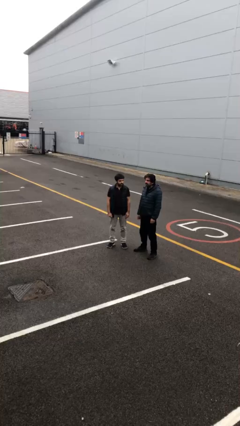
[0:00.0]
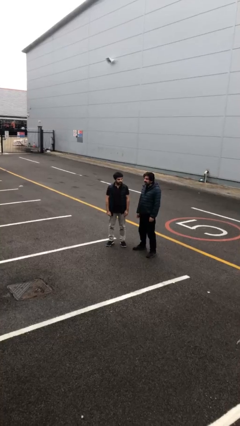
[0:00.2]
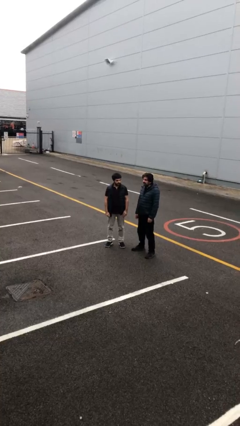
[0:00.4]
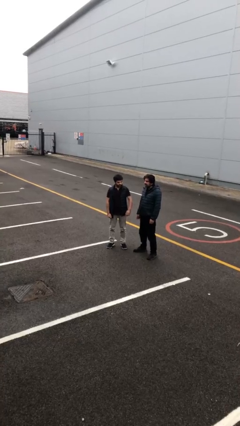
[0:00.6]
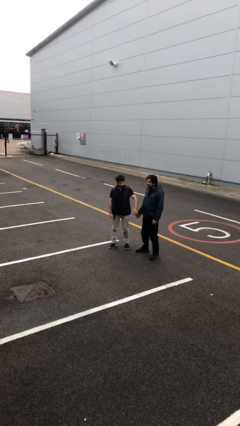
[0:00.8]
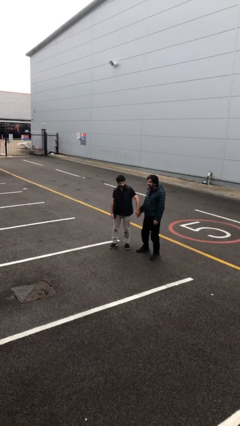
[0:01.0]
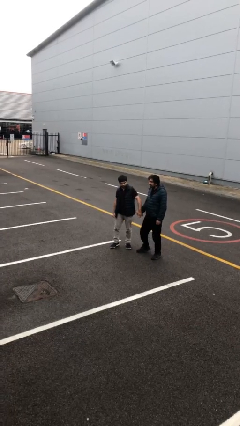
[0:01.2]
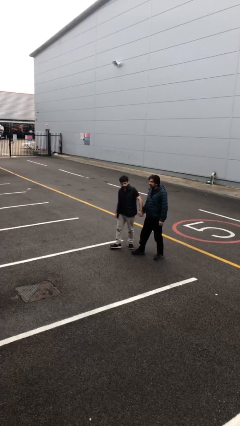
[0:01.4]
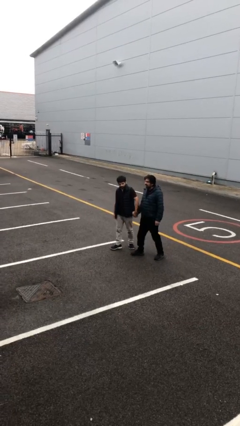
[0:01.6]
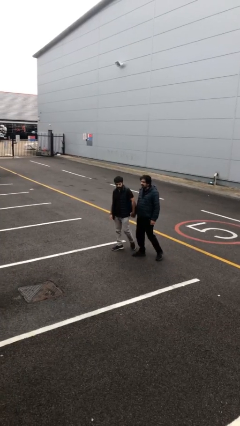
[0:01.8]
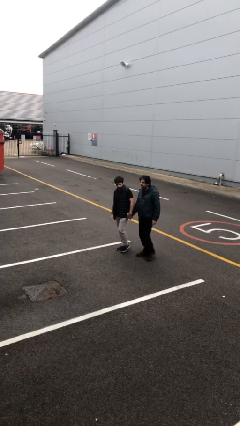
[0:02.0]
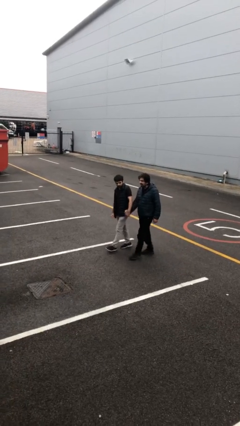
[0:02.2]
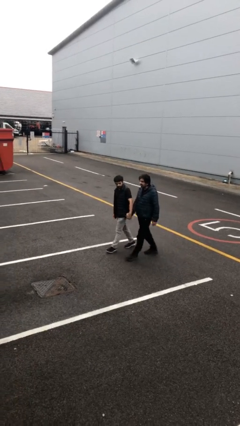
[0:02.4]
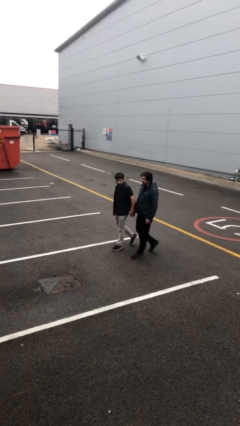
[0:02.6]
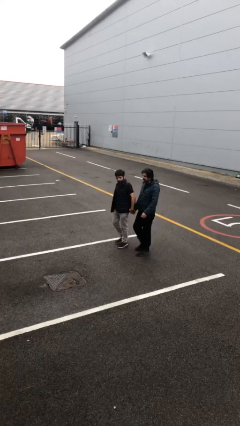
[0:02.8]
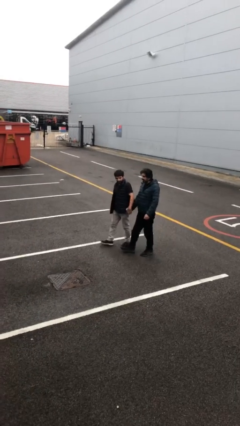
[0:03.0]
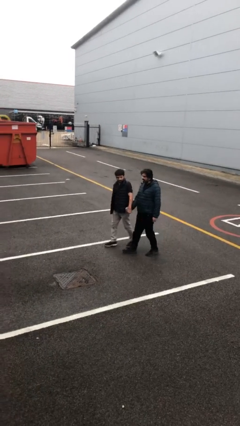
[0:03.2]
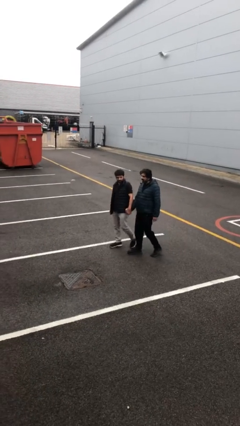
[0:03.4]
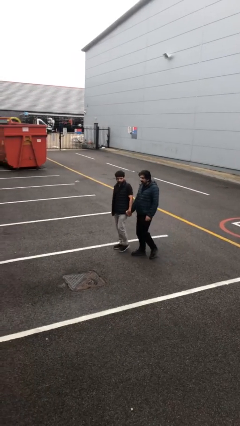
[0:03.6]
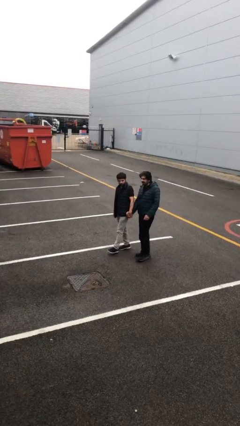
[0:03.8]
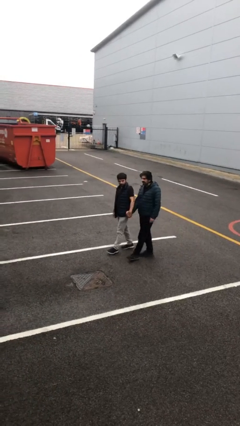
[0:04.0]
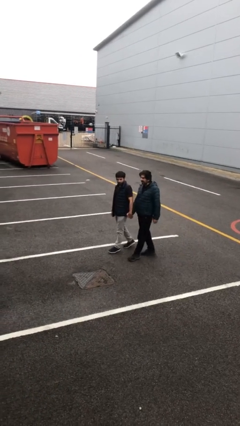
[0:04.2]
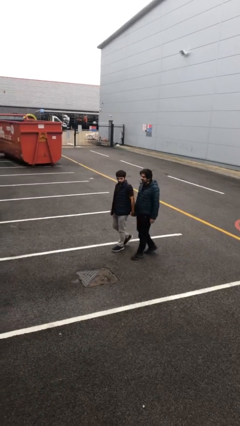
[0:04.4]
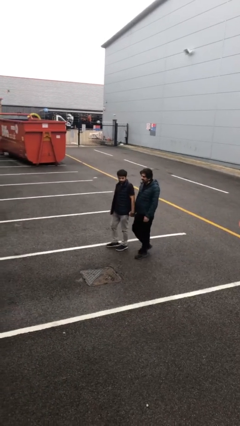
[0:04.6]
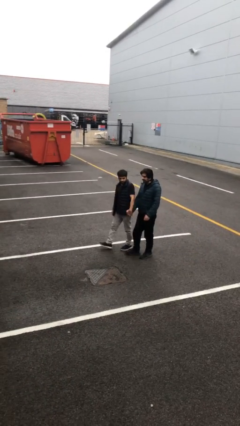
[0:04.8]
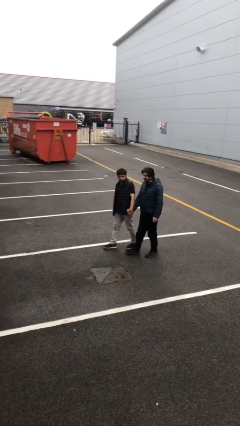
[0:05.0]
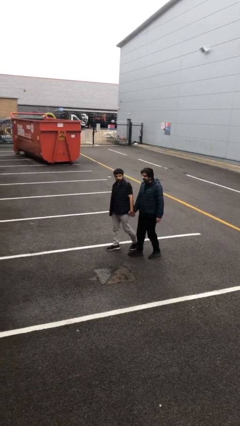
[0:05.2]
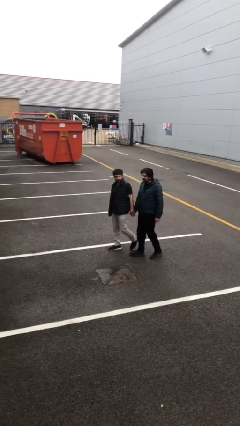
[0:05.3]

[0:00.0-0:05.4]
person holds hand

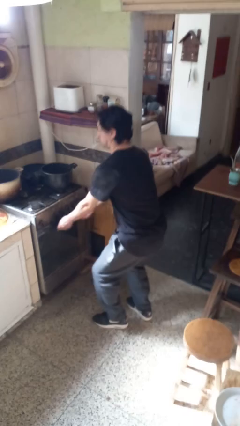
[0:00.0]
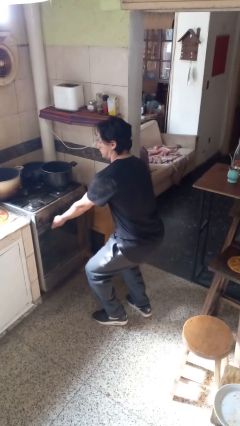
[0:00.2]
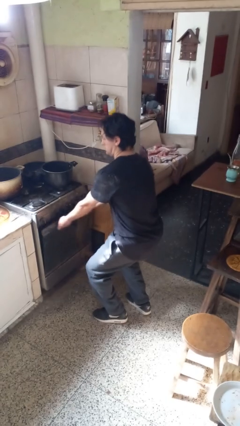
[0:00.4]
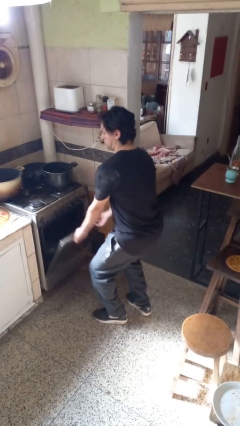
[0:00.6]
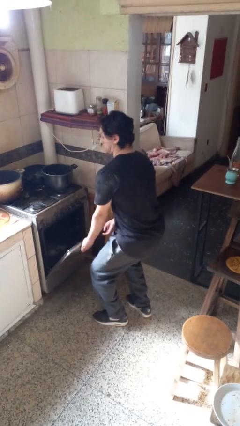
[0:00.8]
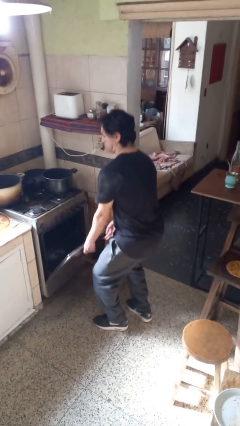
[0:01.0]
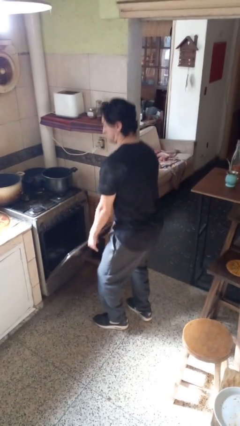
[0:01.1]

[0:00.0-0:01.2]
person opens oven door

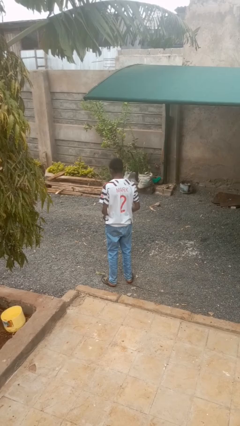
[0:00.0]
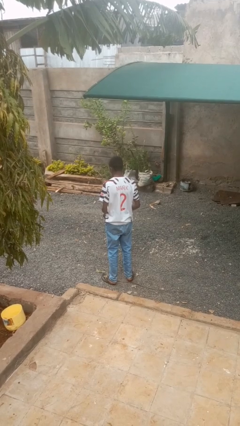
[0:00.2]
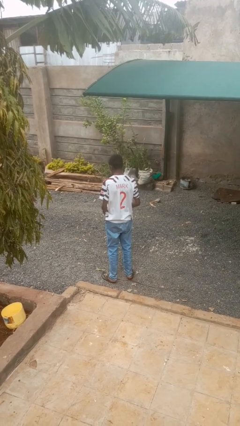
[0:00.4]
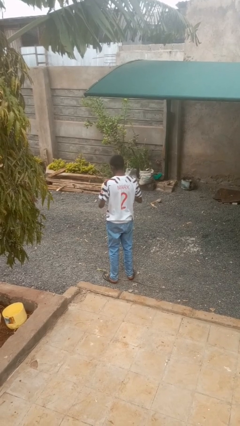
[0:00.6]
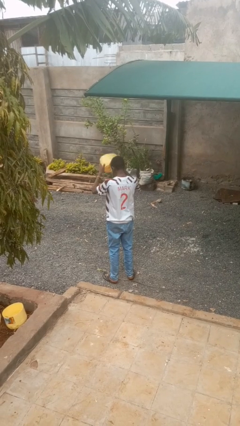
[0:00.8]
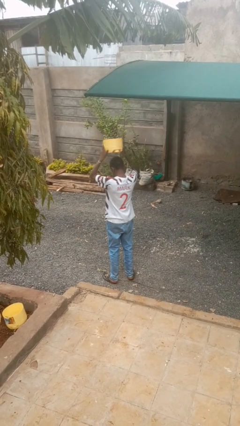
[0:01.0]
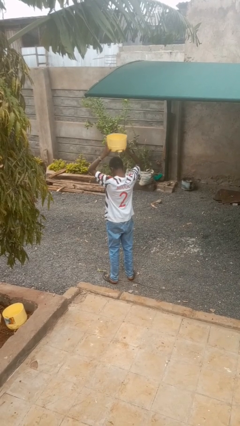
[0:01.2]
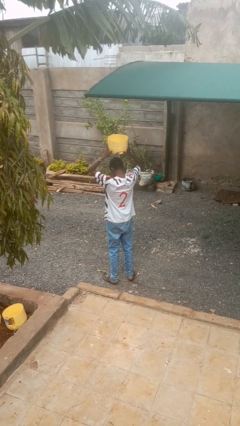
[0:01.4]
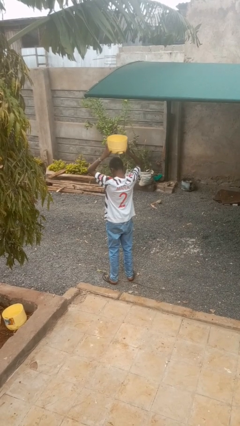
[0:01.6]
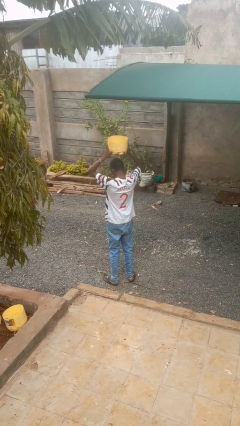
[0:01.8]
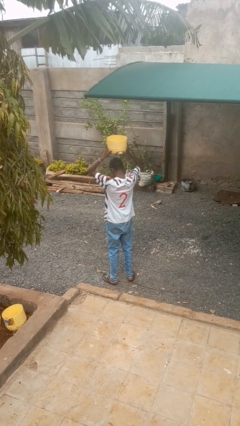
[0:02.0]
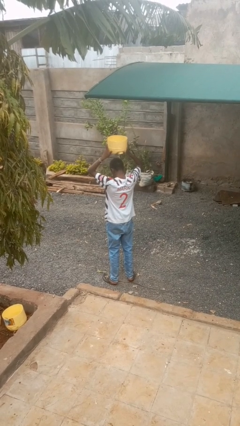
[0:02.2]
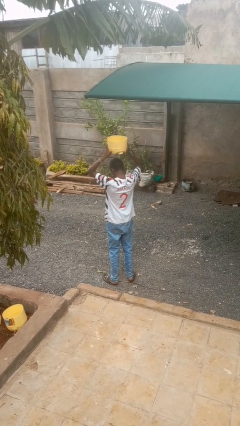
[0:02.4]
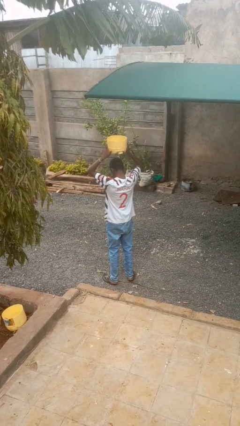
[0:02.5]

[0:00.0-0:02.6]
person holds object above head

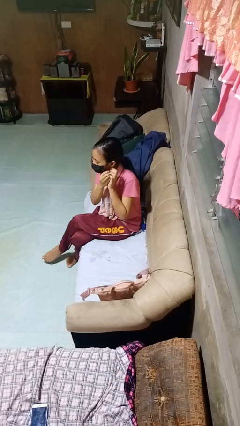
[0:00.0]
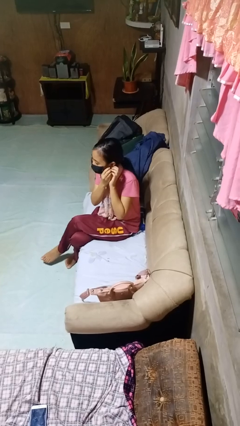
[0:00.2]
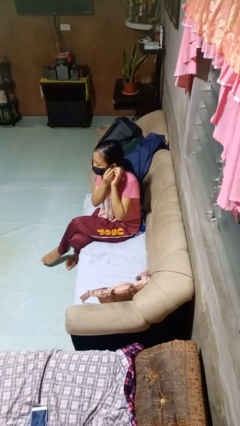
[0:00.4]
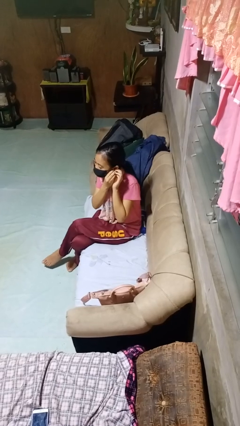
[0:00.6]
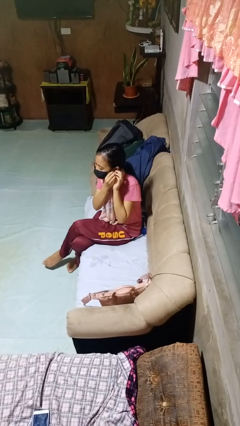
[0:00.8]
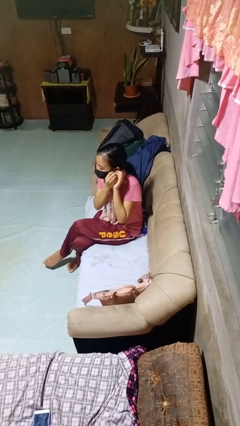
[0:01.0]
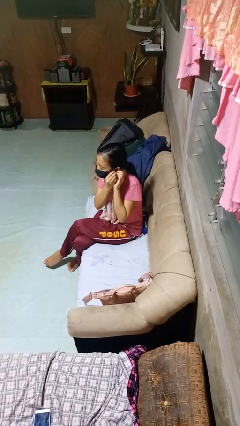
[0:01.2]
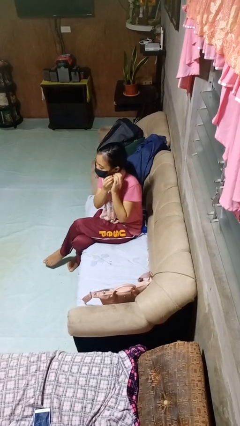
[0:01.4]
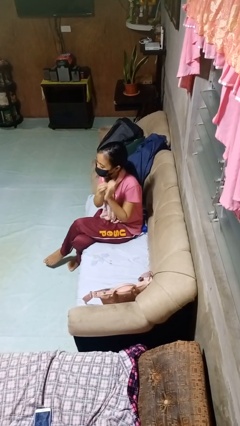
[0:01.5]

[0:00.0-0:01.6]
person takes off earrings

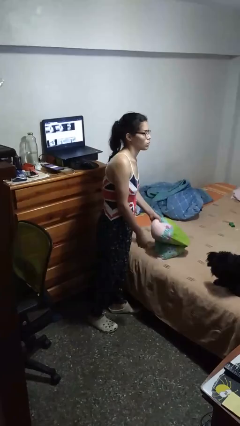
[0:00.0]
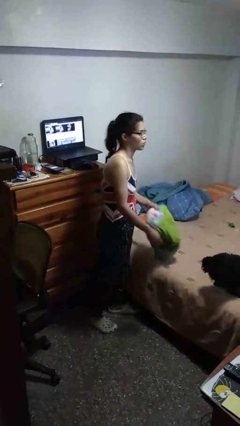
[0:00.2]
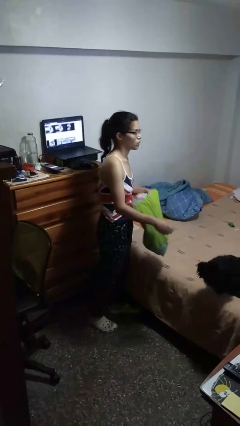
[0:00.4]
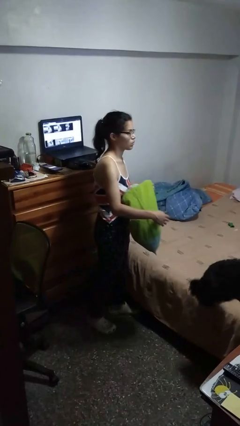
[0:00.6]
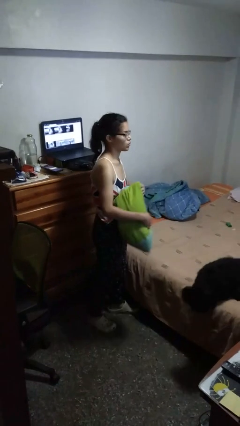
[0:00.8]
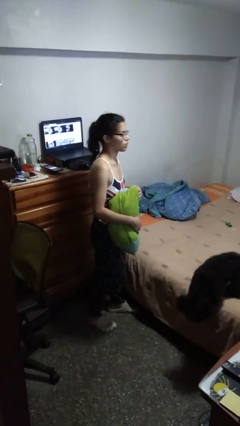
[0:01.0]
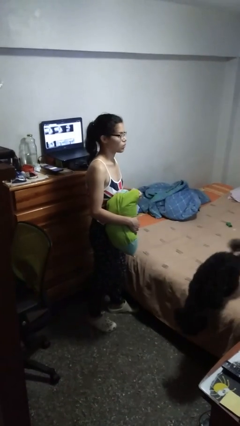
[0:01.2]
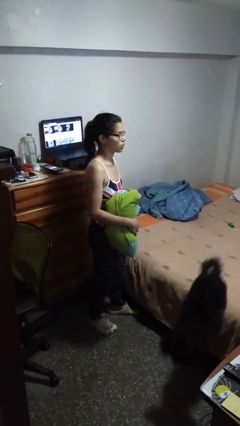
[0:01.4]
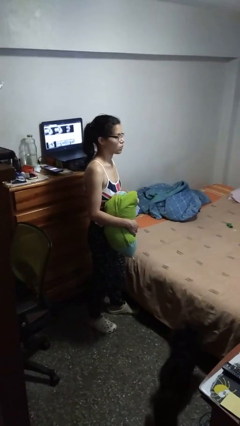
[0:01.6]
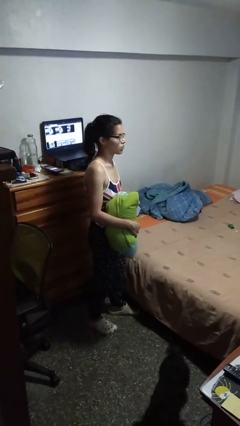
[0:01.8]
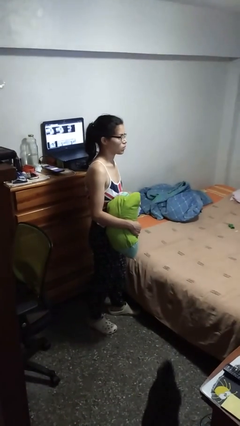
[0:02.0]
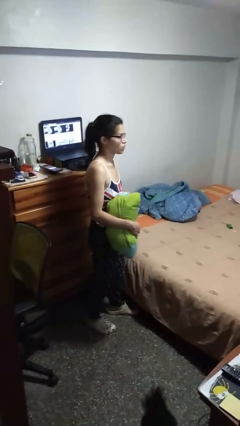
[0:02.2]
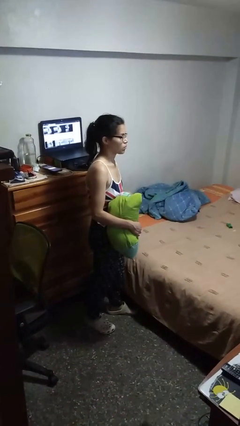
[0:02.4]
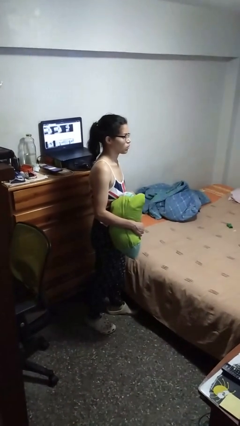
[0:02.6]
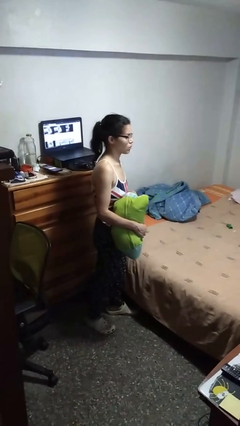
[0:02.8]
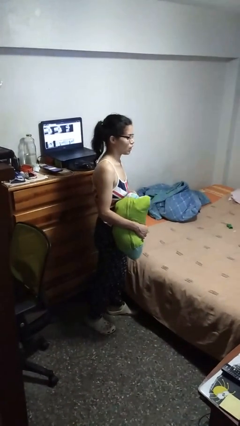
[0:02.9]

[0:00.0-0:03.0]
person picks up object from bed

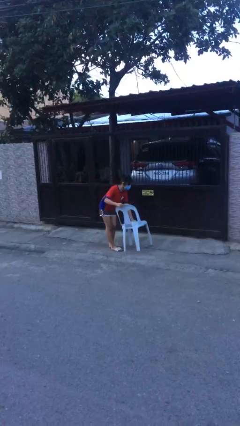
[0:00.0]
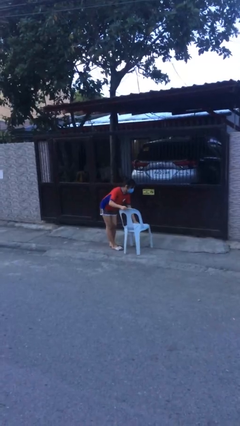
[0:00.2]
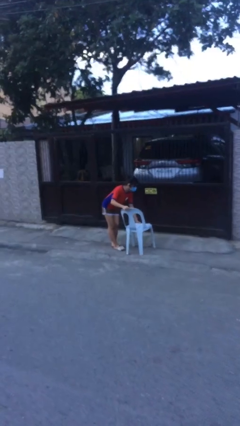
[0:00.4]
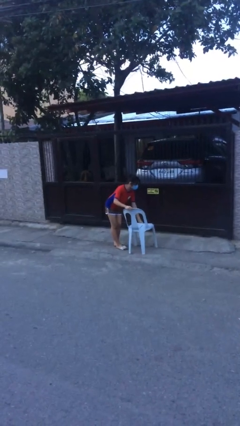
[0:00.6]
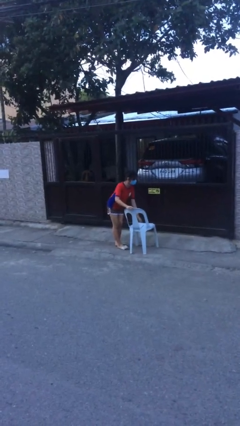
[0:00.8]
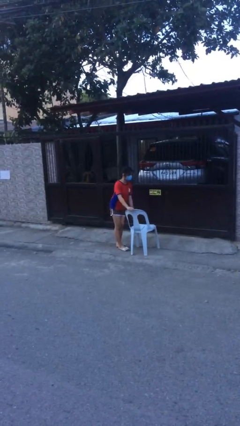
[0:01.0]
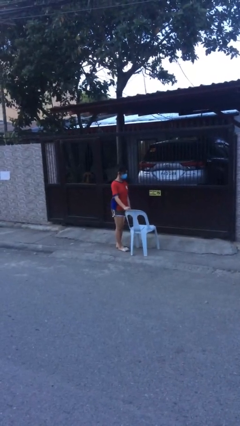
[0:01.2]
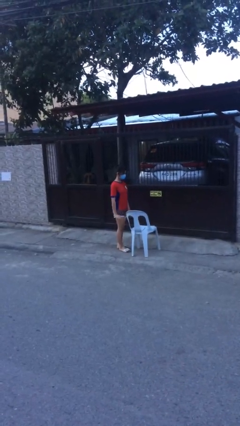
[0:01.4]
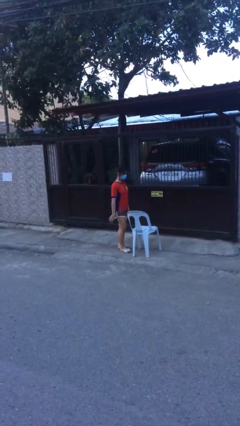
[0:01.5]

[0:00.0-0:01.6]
person puts down object on floor

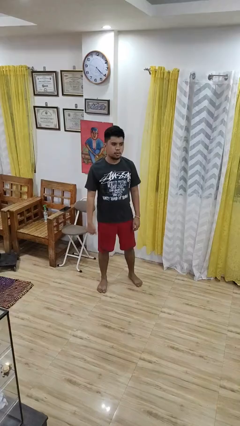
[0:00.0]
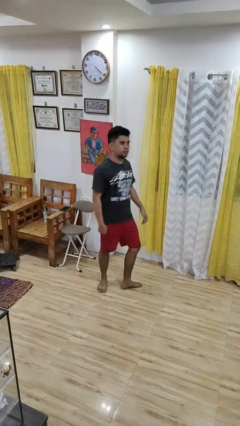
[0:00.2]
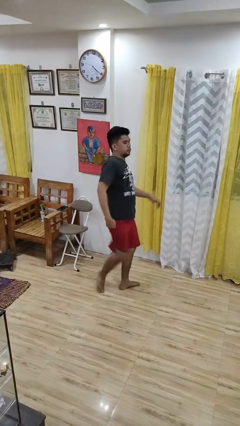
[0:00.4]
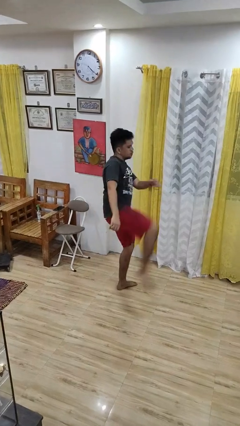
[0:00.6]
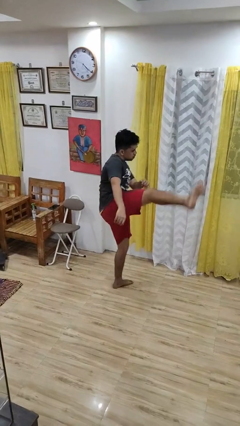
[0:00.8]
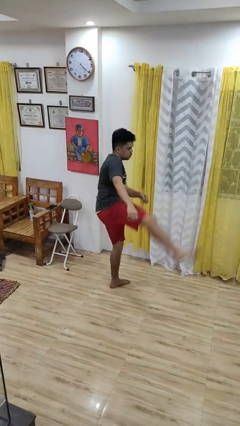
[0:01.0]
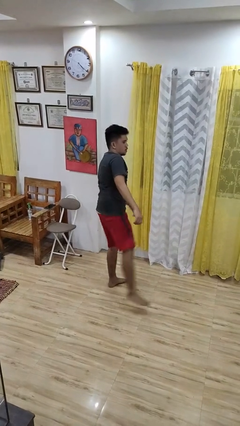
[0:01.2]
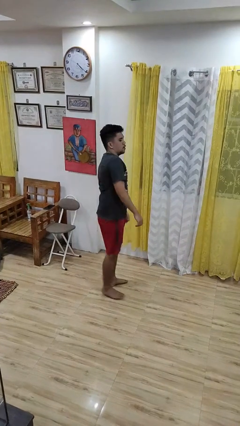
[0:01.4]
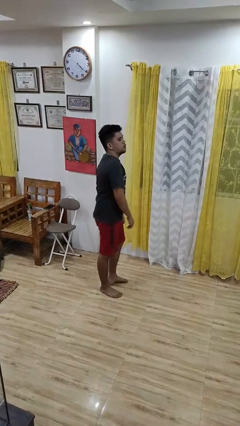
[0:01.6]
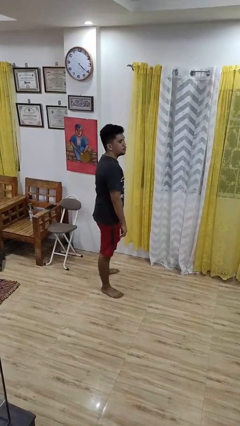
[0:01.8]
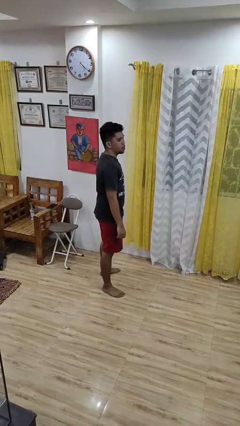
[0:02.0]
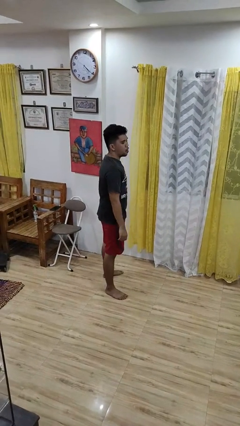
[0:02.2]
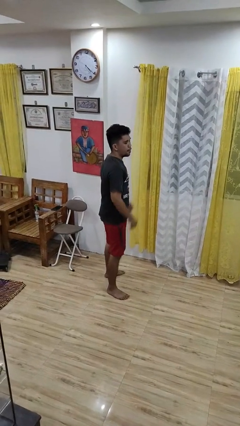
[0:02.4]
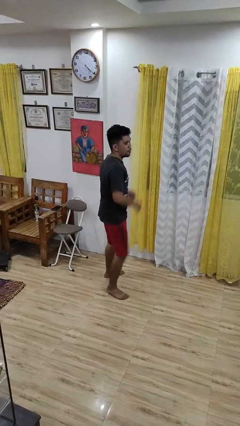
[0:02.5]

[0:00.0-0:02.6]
person karate kicks
